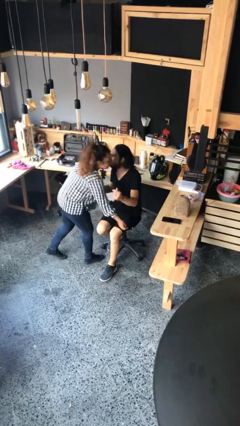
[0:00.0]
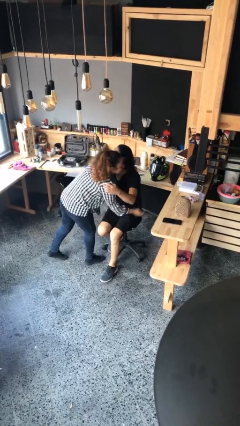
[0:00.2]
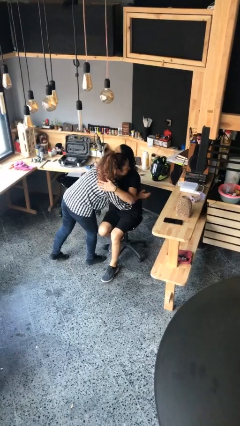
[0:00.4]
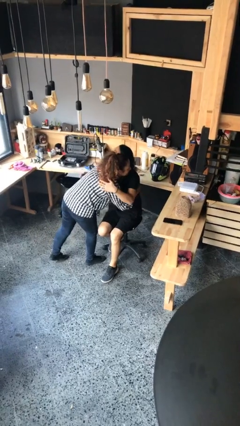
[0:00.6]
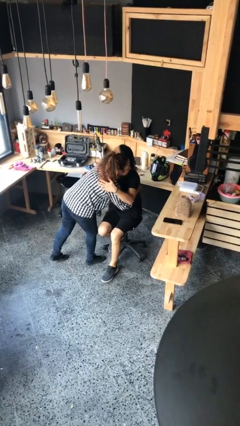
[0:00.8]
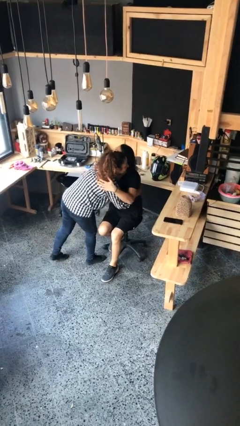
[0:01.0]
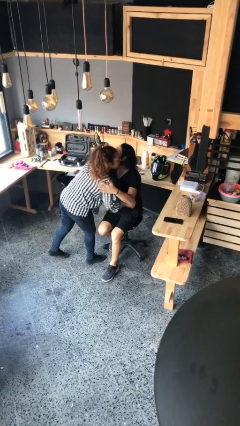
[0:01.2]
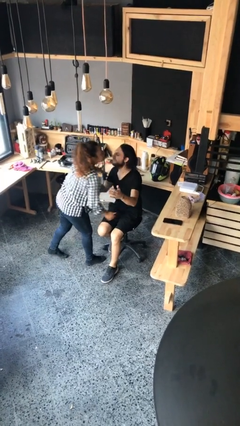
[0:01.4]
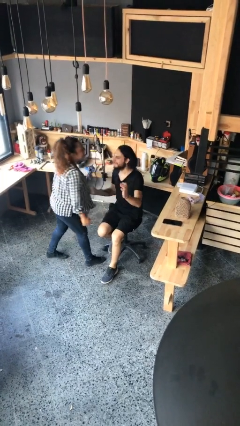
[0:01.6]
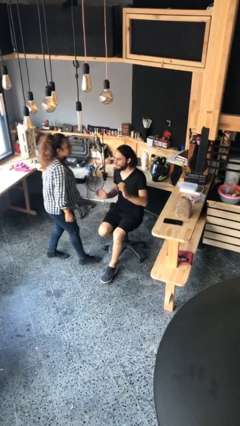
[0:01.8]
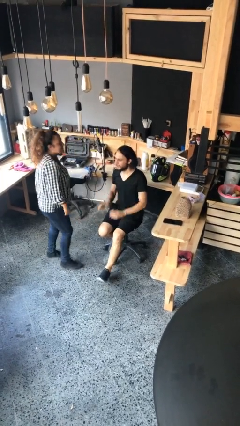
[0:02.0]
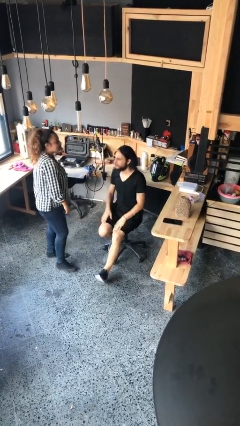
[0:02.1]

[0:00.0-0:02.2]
person embraces person

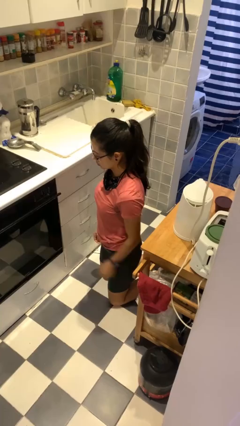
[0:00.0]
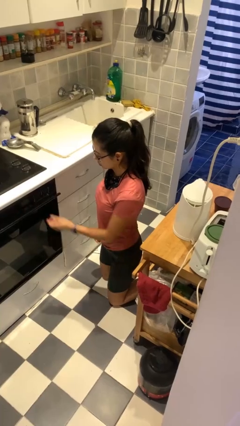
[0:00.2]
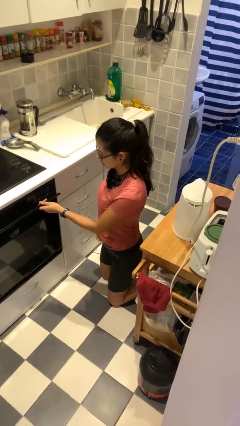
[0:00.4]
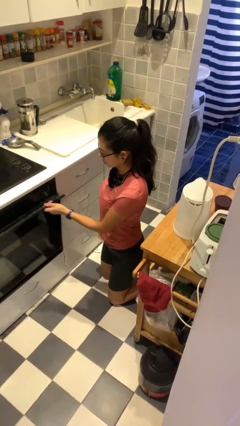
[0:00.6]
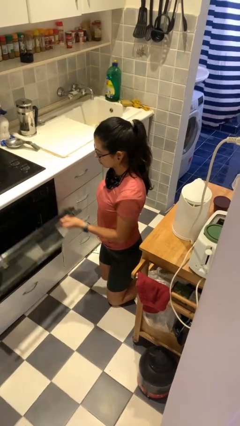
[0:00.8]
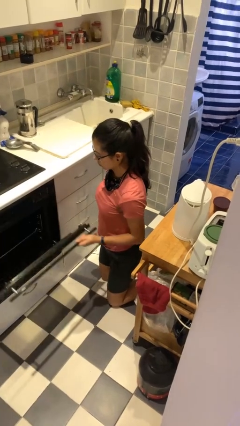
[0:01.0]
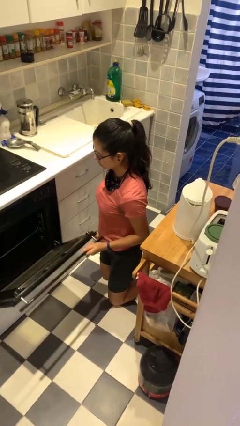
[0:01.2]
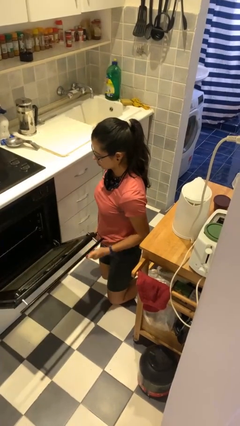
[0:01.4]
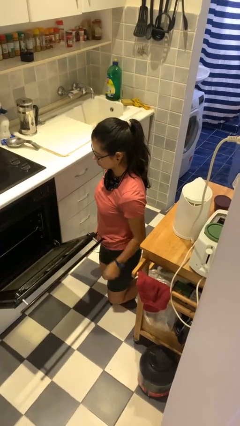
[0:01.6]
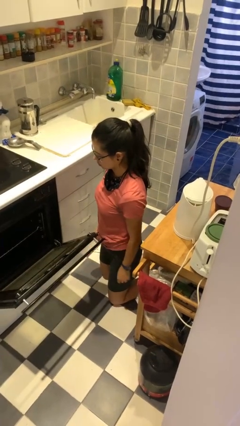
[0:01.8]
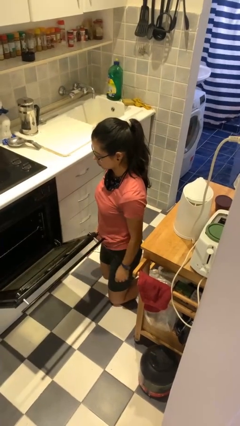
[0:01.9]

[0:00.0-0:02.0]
person opens oven door

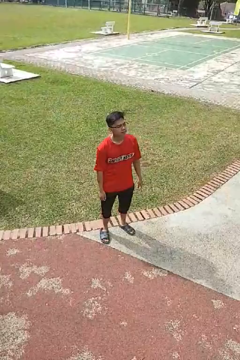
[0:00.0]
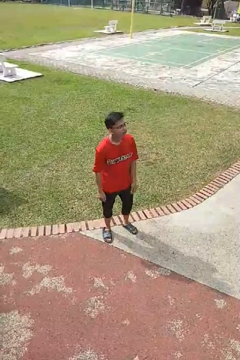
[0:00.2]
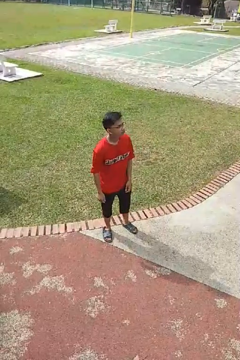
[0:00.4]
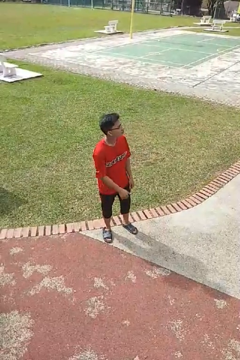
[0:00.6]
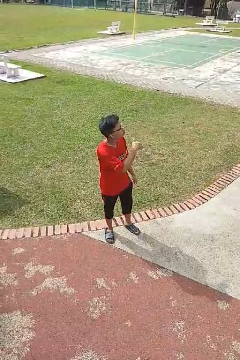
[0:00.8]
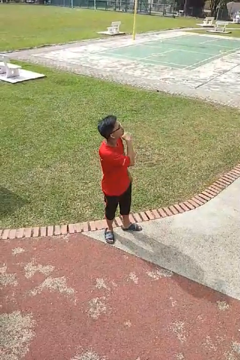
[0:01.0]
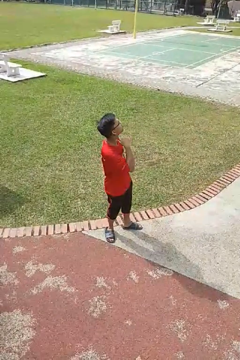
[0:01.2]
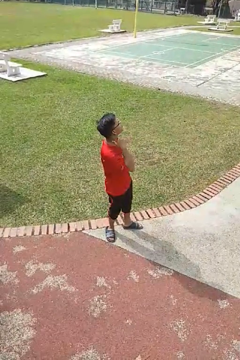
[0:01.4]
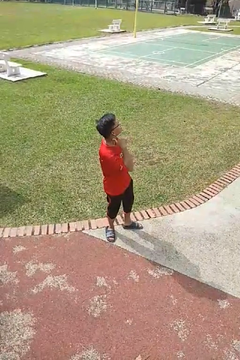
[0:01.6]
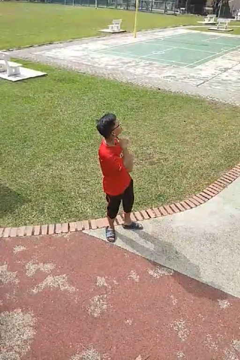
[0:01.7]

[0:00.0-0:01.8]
person gestures cut

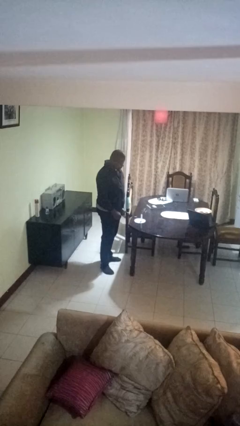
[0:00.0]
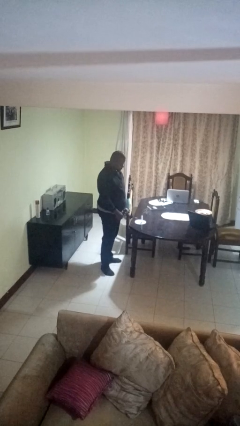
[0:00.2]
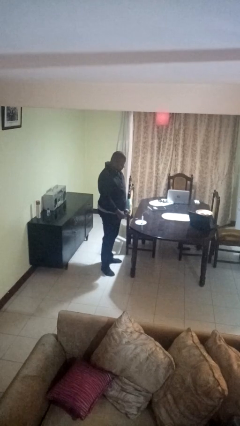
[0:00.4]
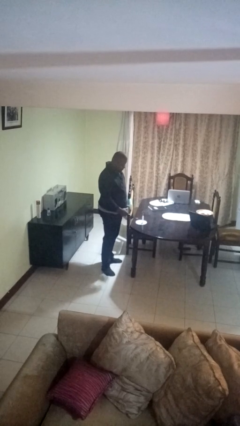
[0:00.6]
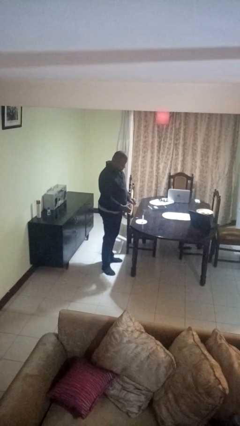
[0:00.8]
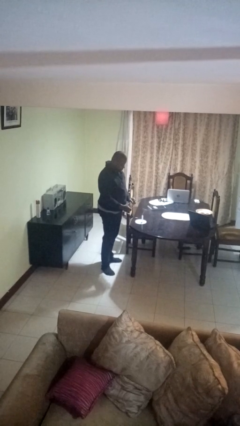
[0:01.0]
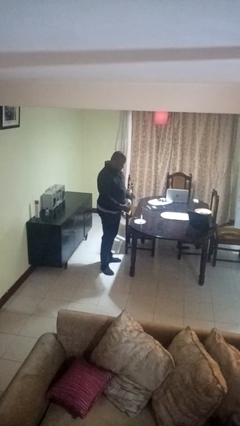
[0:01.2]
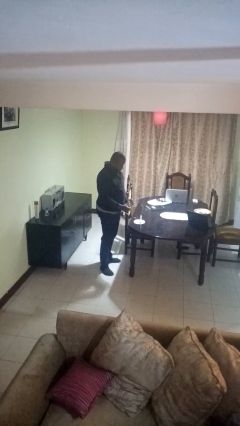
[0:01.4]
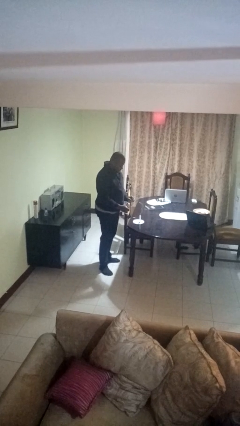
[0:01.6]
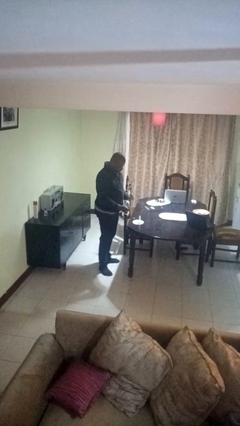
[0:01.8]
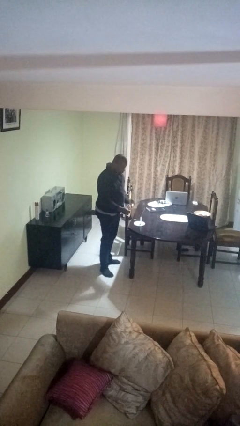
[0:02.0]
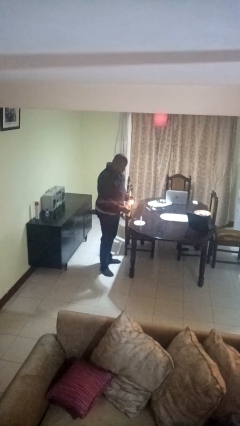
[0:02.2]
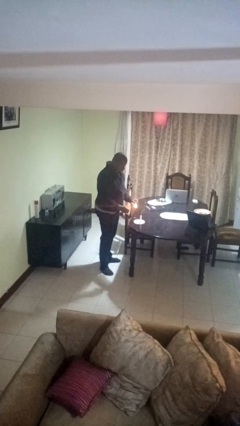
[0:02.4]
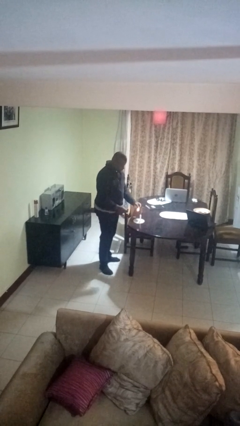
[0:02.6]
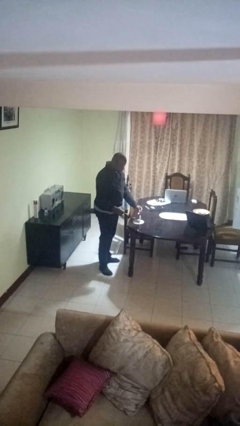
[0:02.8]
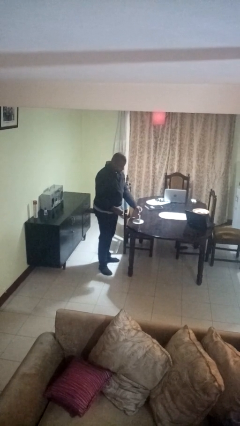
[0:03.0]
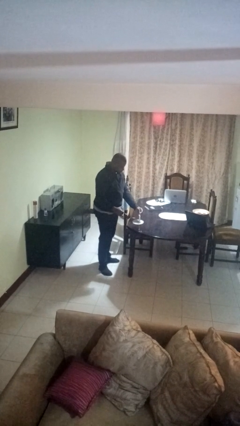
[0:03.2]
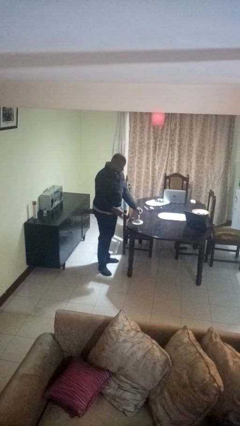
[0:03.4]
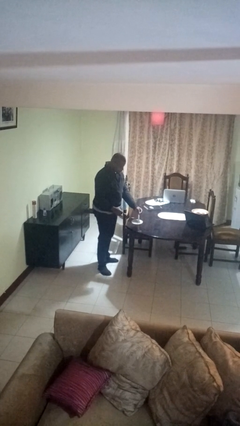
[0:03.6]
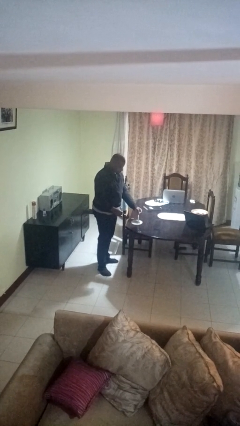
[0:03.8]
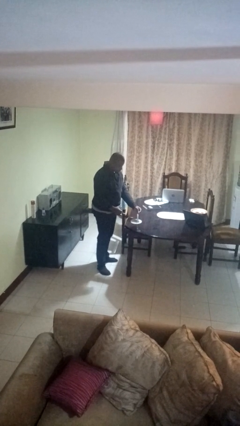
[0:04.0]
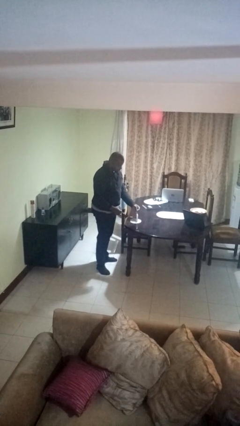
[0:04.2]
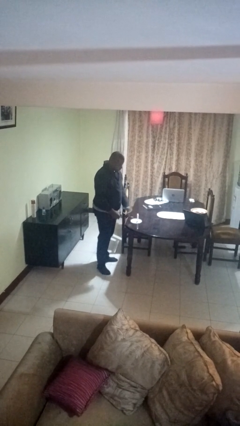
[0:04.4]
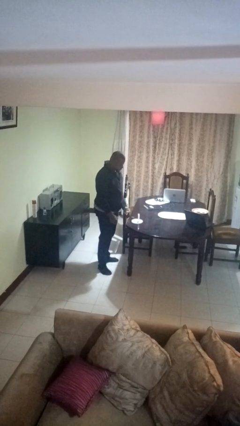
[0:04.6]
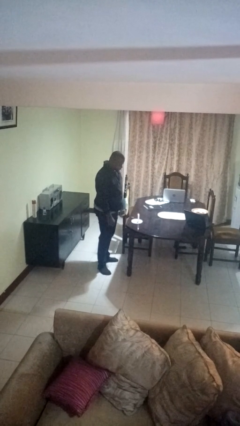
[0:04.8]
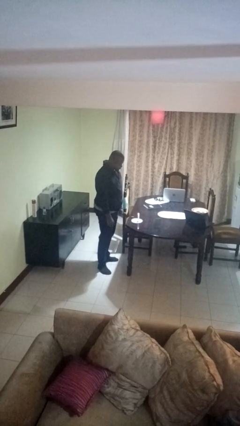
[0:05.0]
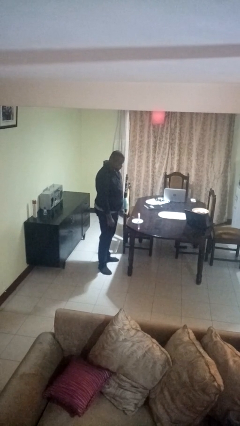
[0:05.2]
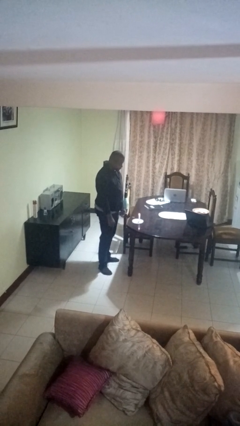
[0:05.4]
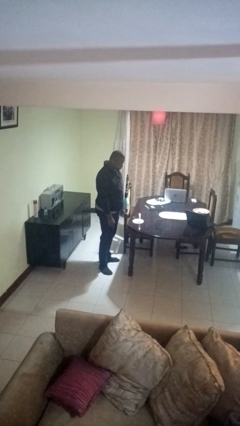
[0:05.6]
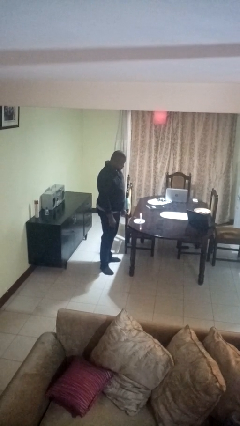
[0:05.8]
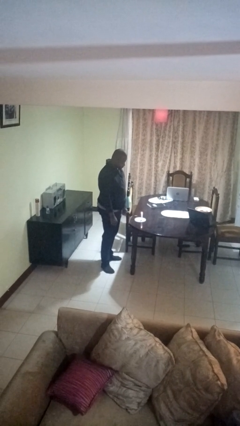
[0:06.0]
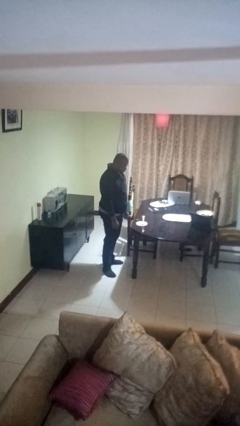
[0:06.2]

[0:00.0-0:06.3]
person lights candle

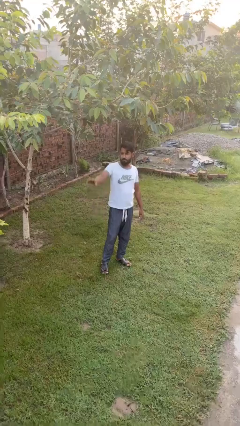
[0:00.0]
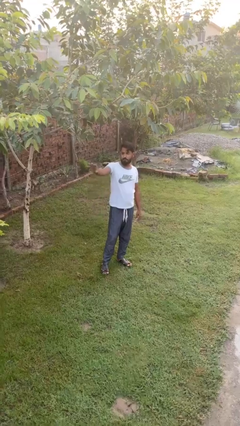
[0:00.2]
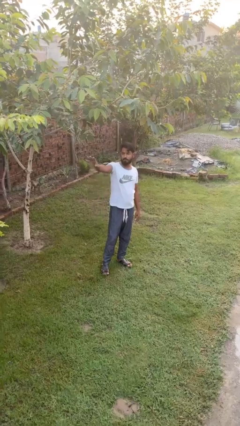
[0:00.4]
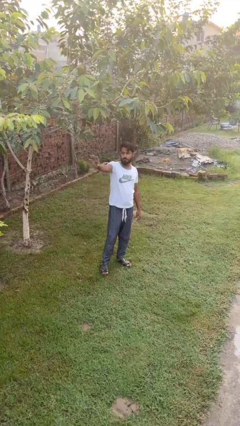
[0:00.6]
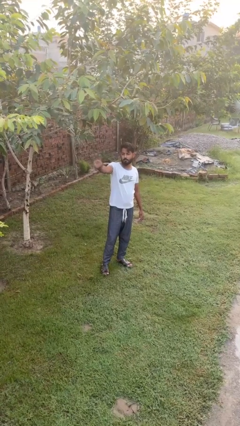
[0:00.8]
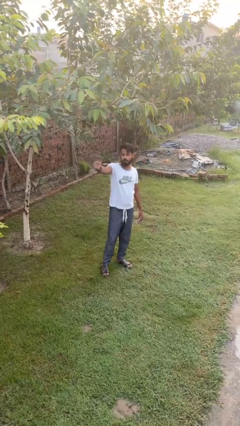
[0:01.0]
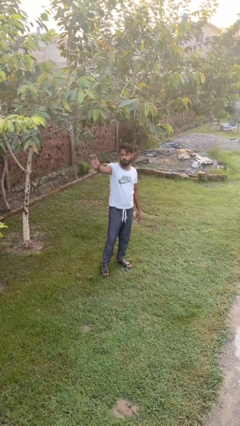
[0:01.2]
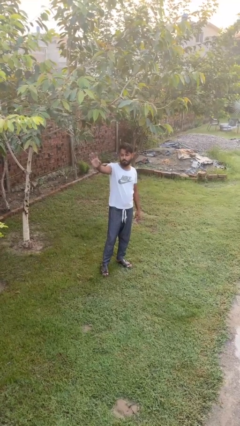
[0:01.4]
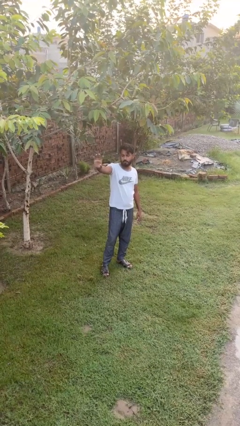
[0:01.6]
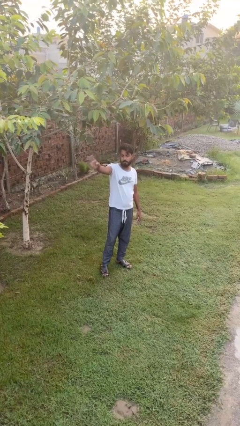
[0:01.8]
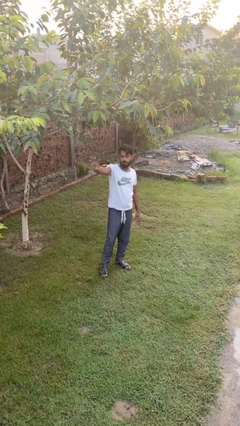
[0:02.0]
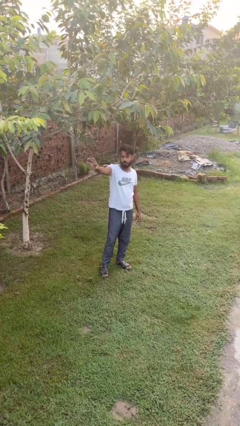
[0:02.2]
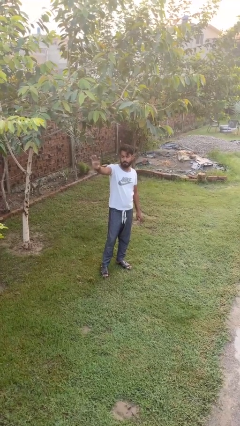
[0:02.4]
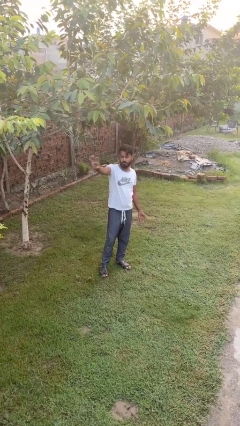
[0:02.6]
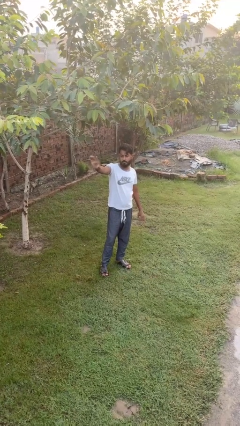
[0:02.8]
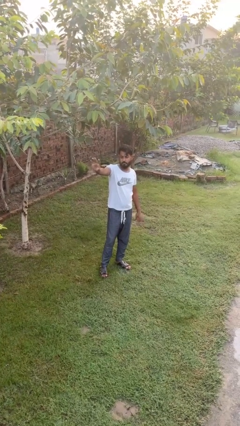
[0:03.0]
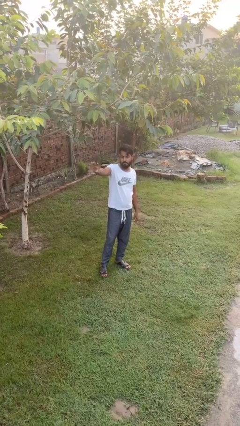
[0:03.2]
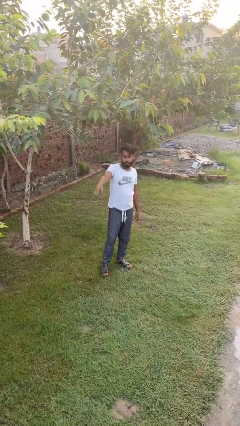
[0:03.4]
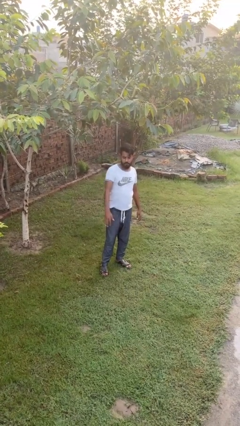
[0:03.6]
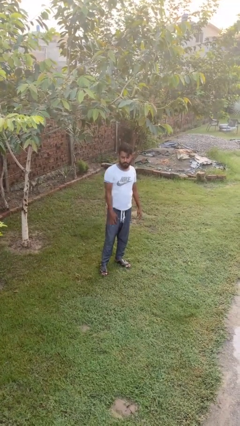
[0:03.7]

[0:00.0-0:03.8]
person waves at person

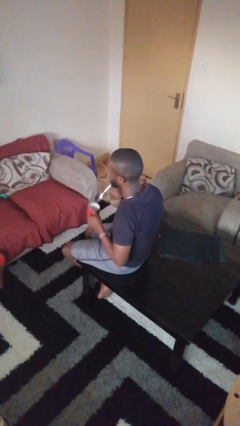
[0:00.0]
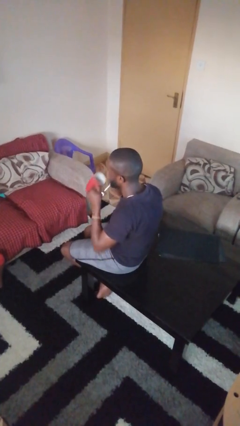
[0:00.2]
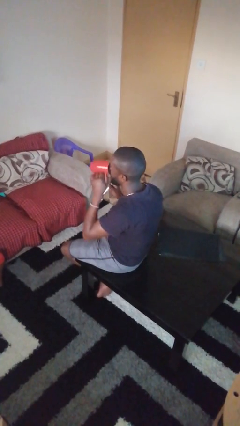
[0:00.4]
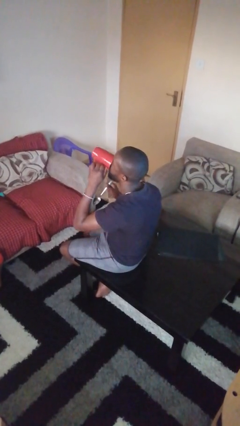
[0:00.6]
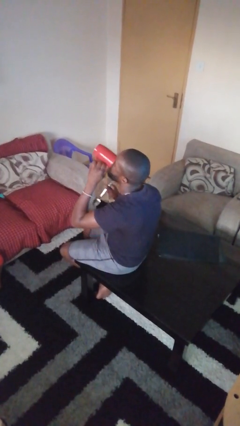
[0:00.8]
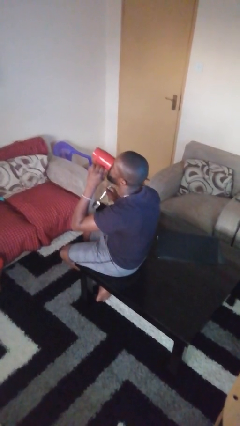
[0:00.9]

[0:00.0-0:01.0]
person drinks from mug

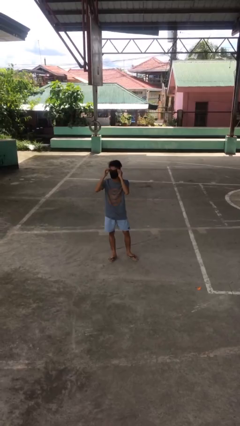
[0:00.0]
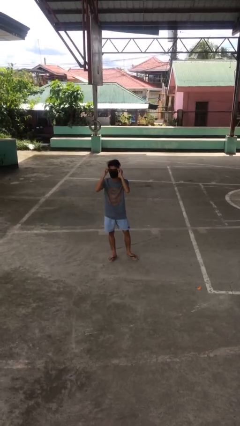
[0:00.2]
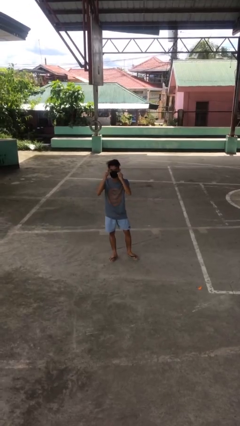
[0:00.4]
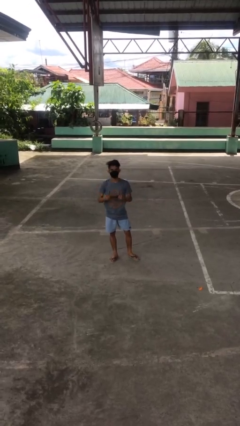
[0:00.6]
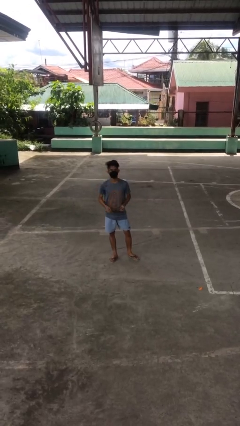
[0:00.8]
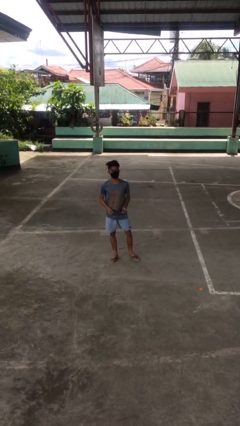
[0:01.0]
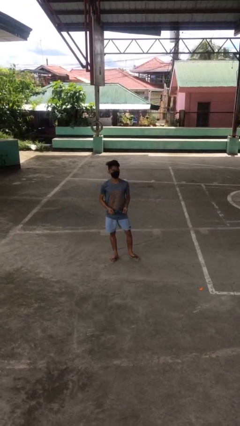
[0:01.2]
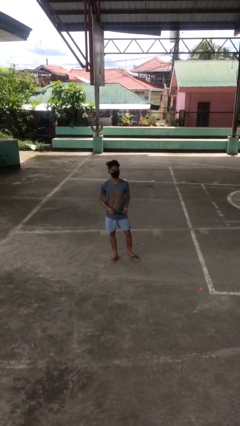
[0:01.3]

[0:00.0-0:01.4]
person takes off glasses
